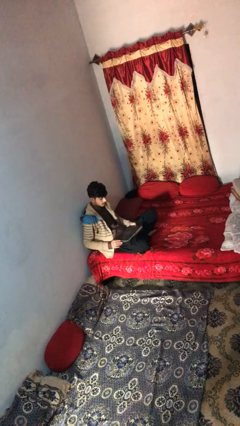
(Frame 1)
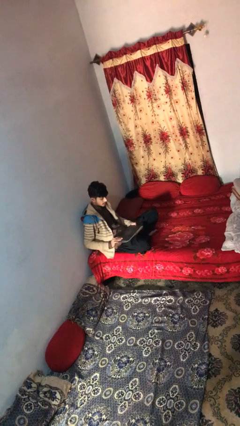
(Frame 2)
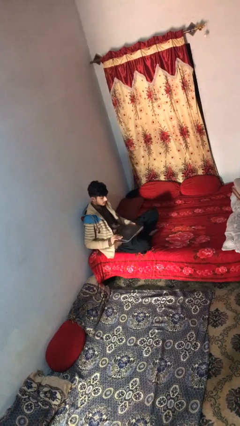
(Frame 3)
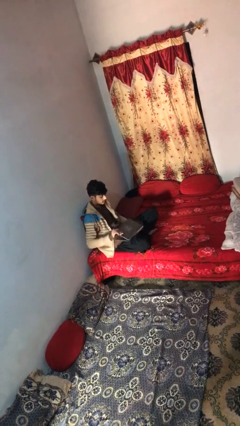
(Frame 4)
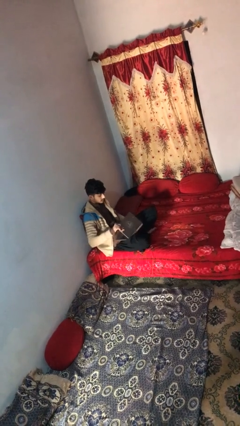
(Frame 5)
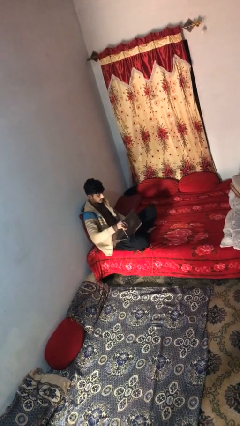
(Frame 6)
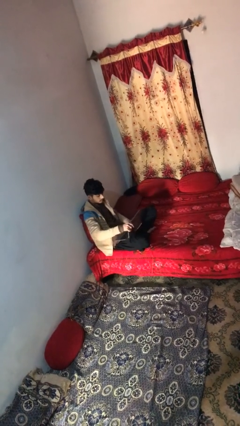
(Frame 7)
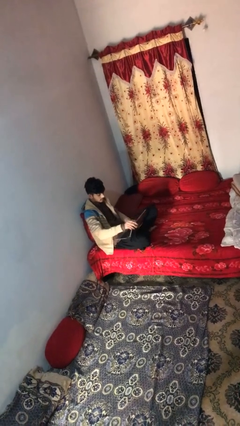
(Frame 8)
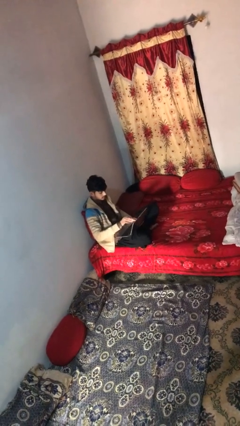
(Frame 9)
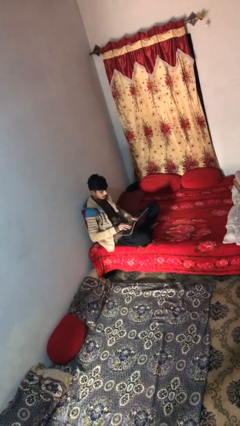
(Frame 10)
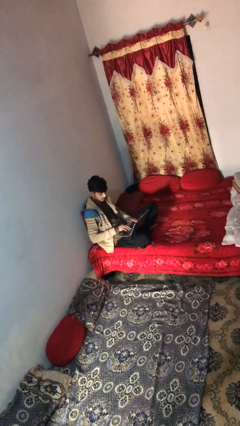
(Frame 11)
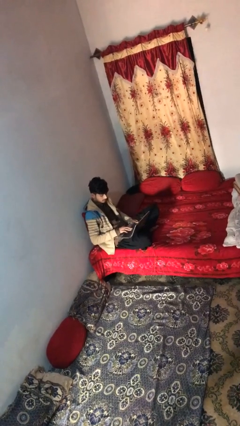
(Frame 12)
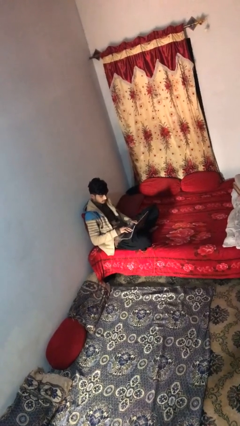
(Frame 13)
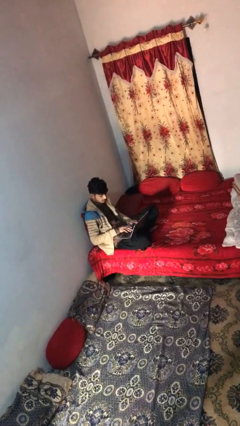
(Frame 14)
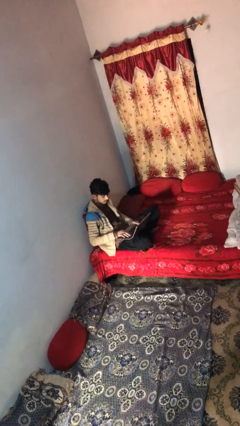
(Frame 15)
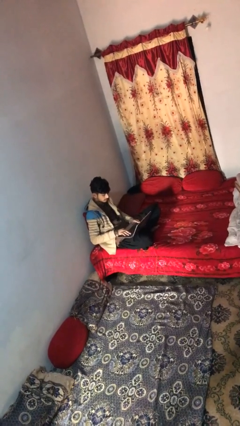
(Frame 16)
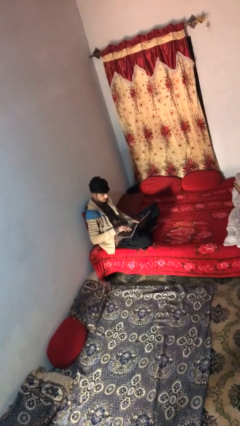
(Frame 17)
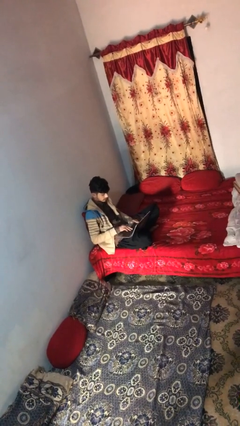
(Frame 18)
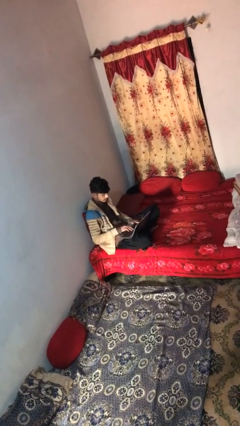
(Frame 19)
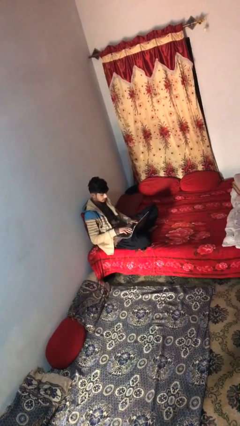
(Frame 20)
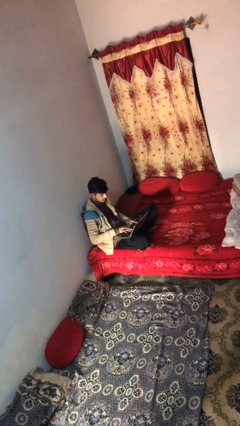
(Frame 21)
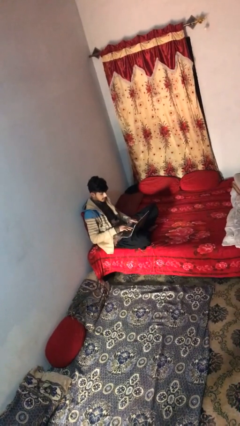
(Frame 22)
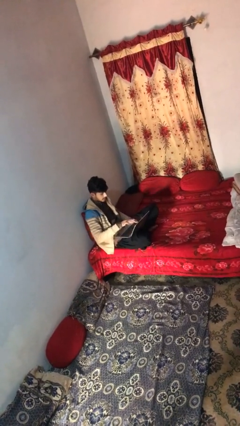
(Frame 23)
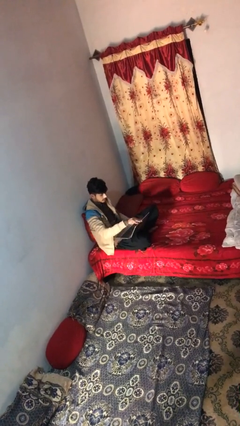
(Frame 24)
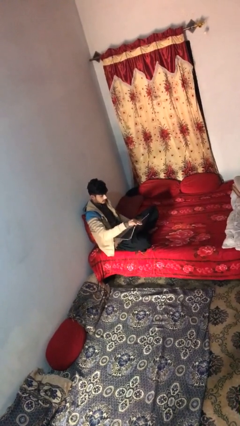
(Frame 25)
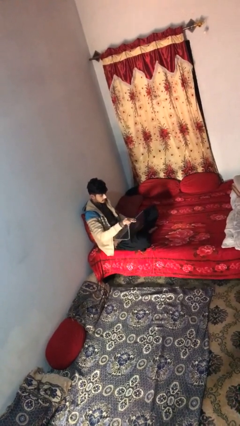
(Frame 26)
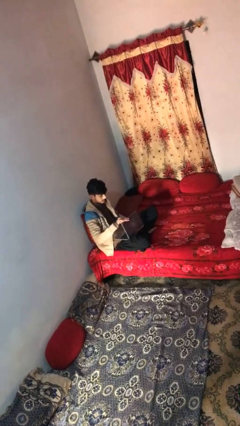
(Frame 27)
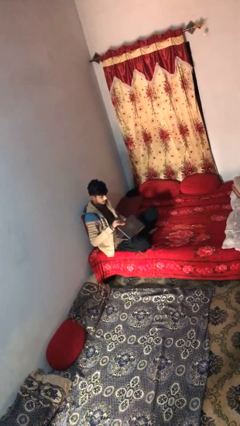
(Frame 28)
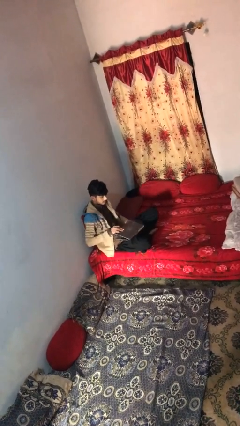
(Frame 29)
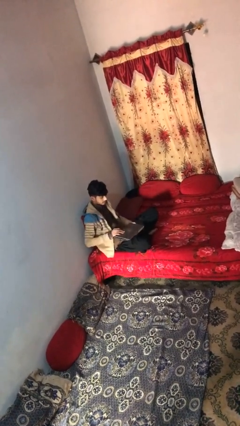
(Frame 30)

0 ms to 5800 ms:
person interacts with laptop

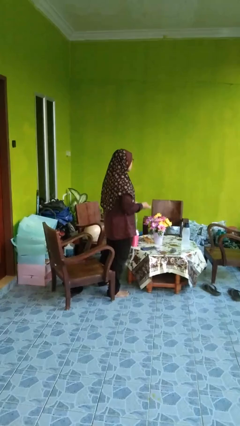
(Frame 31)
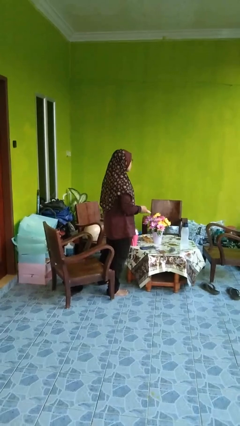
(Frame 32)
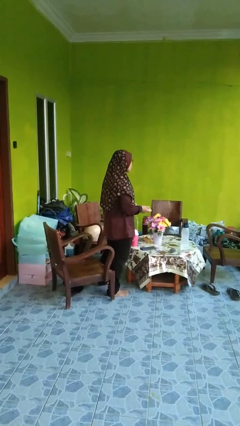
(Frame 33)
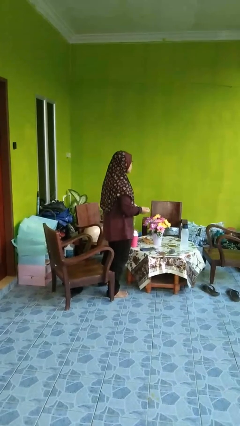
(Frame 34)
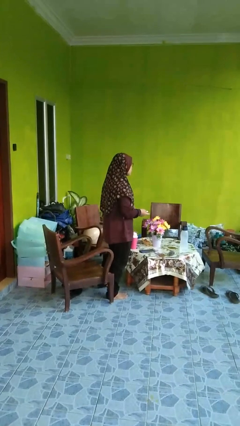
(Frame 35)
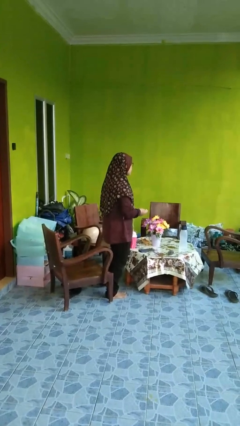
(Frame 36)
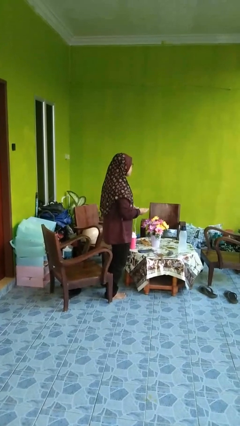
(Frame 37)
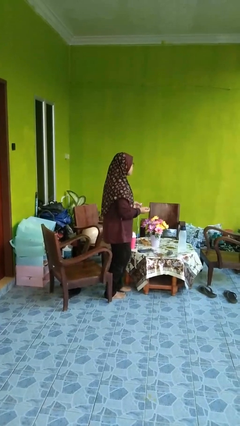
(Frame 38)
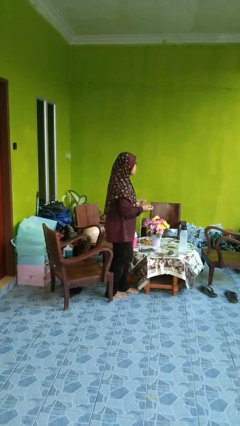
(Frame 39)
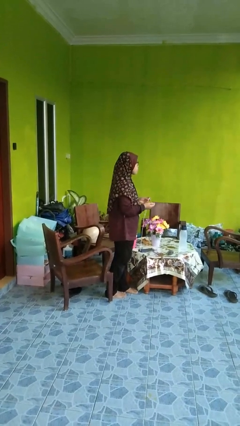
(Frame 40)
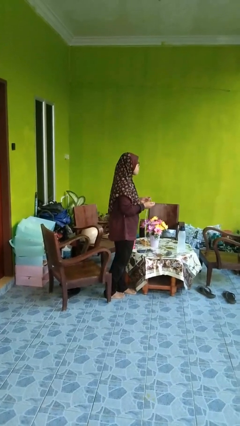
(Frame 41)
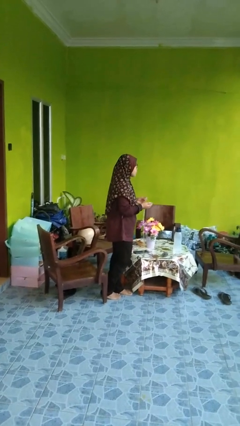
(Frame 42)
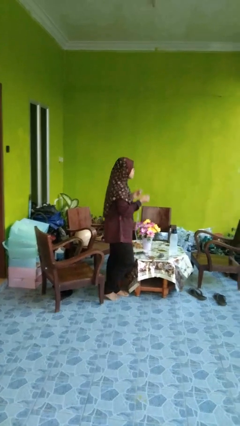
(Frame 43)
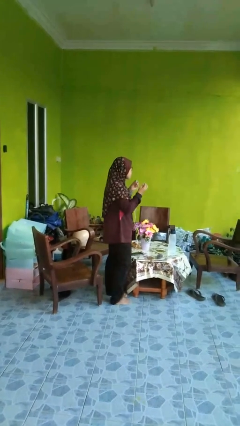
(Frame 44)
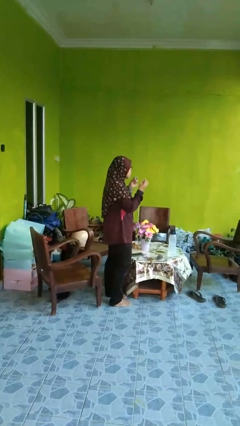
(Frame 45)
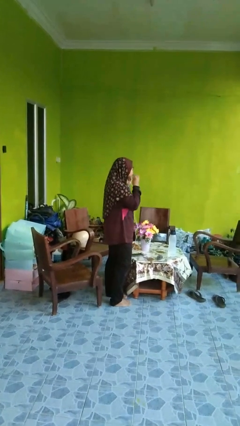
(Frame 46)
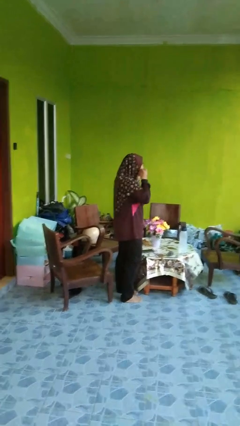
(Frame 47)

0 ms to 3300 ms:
person takes off headphones

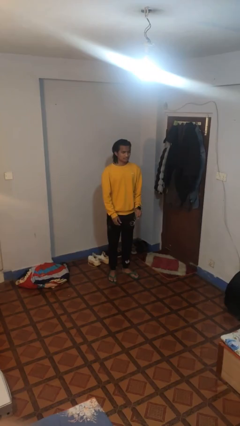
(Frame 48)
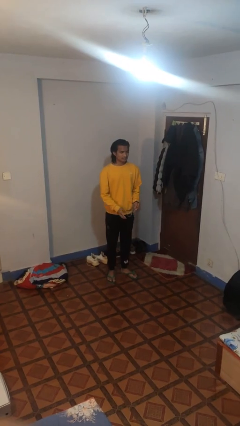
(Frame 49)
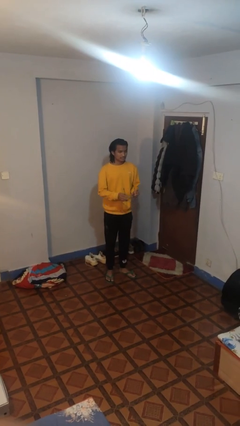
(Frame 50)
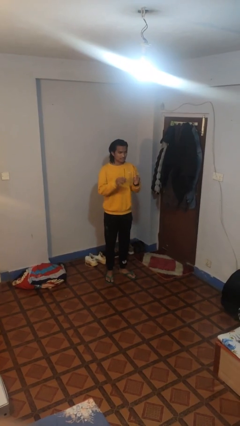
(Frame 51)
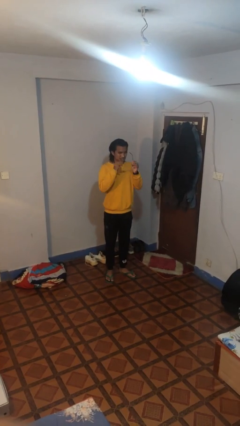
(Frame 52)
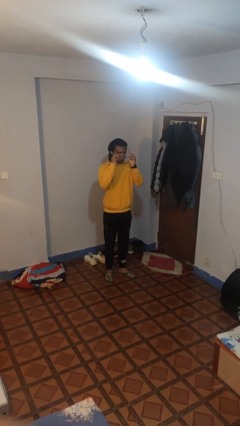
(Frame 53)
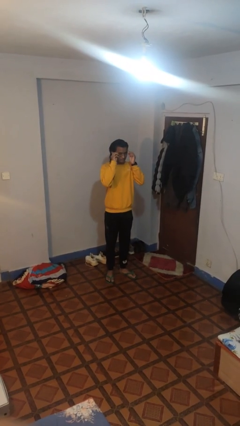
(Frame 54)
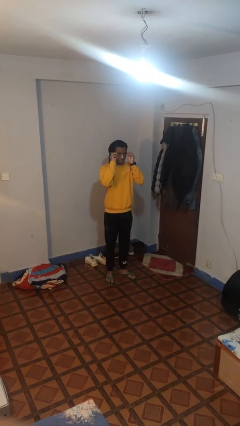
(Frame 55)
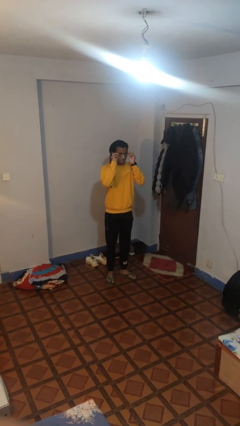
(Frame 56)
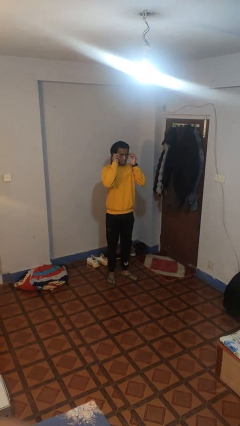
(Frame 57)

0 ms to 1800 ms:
person puts on glasses

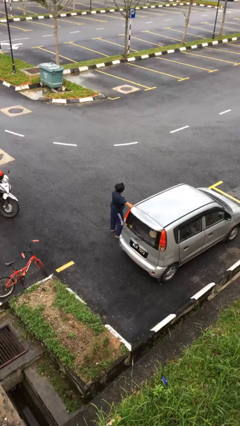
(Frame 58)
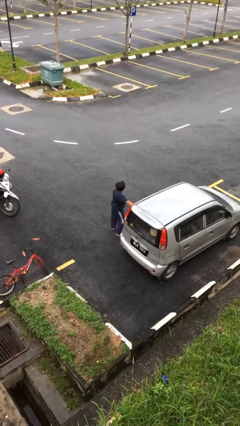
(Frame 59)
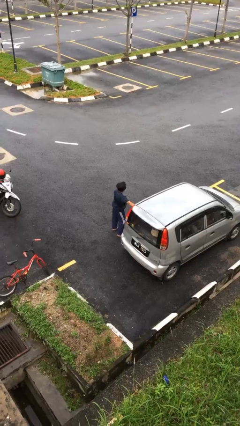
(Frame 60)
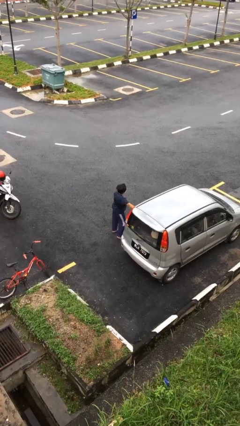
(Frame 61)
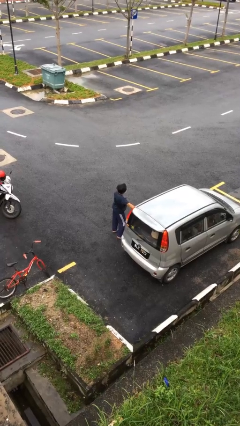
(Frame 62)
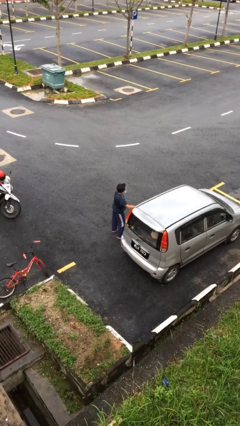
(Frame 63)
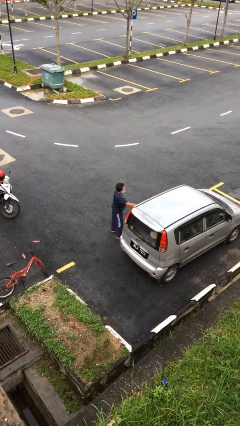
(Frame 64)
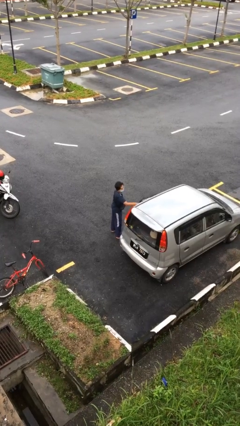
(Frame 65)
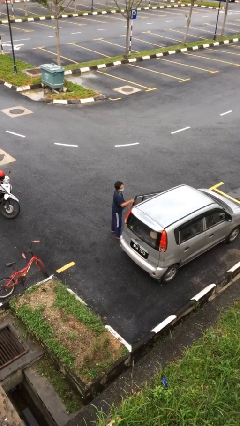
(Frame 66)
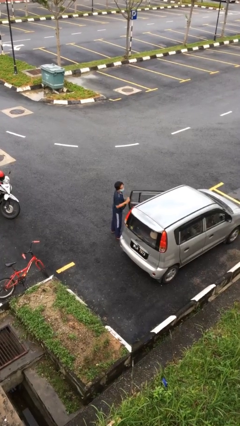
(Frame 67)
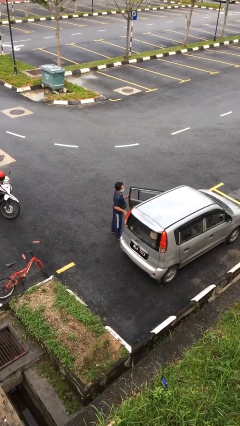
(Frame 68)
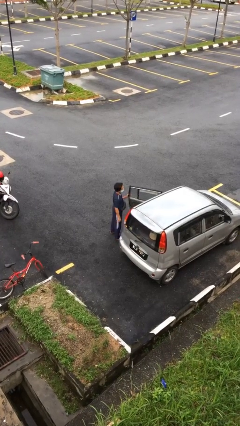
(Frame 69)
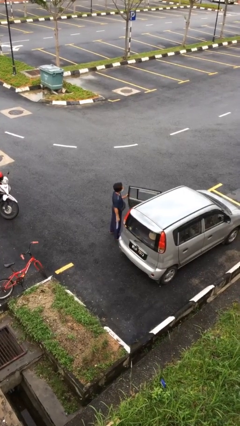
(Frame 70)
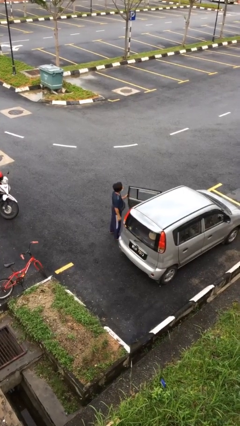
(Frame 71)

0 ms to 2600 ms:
person opens car door

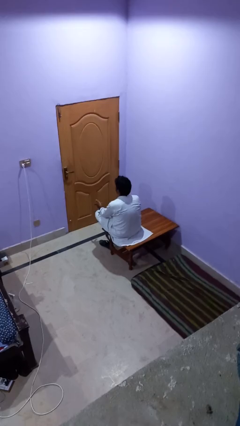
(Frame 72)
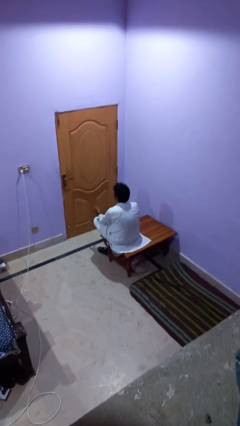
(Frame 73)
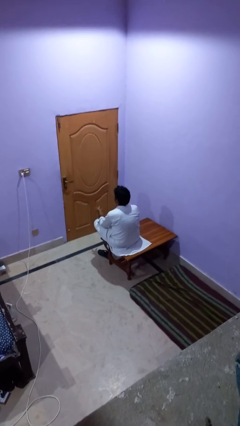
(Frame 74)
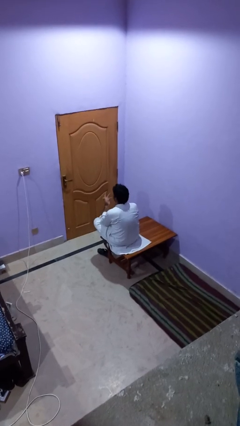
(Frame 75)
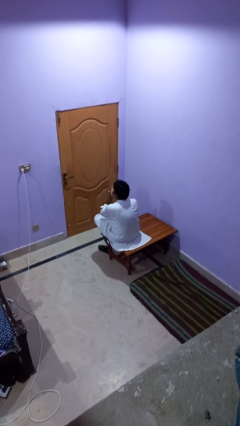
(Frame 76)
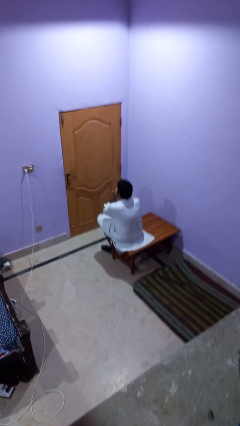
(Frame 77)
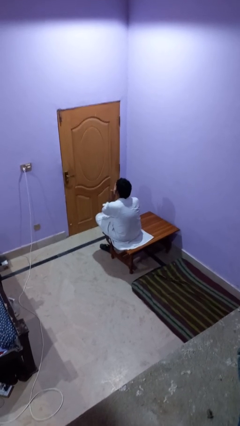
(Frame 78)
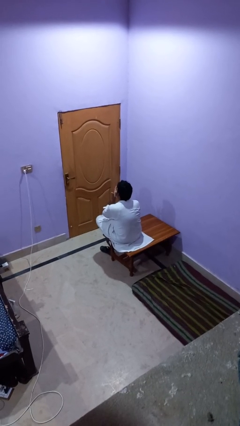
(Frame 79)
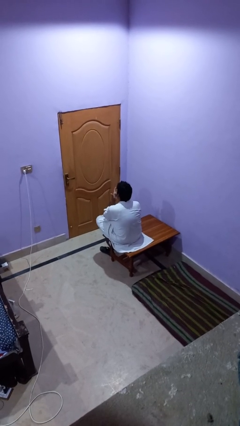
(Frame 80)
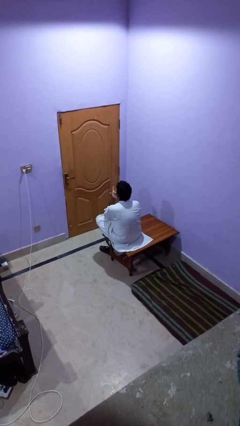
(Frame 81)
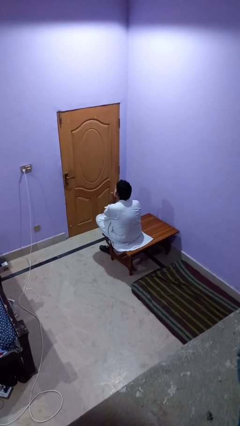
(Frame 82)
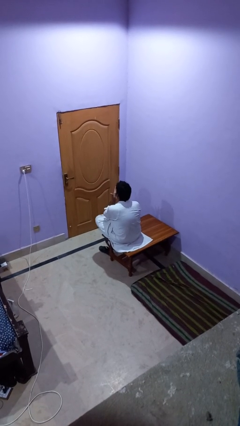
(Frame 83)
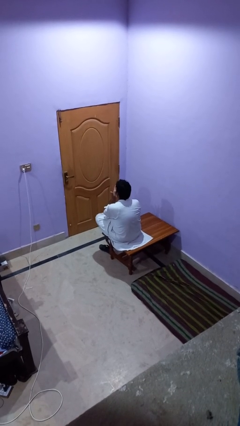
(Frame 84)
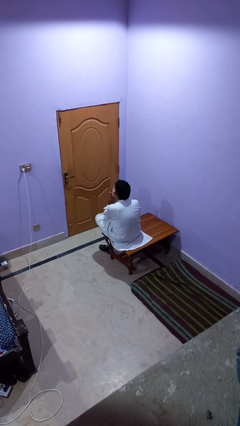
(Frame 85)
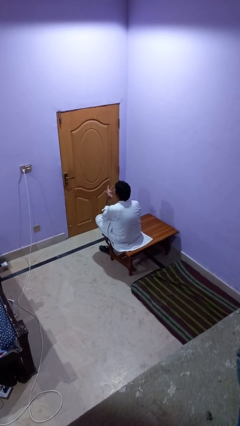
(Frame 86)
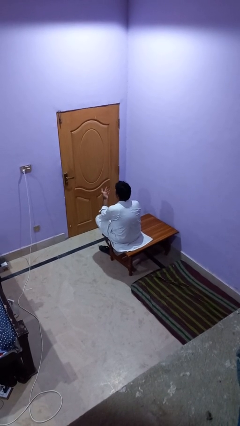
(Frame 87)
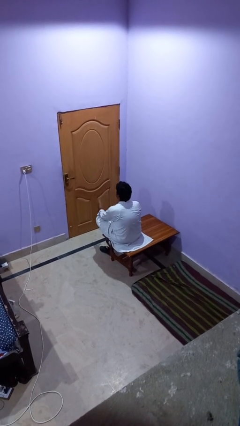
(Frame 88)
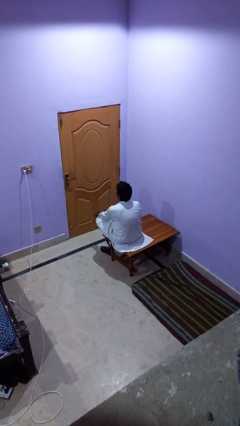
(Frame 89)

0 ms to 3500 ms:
person licks fingers

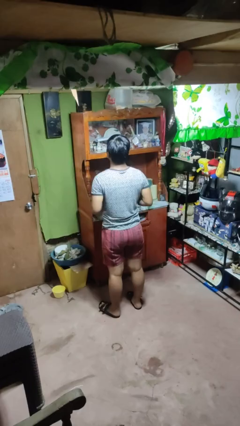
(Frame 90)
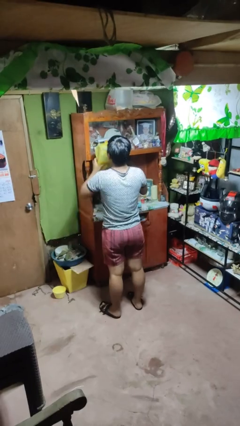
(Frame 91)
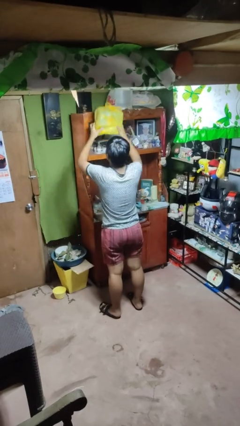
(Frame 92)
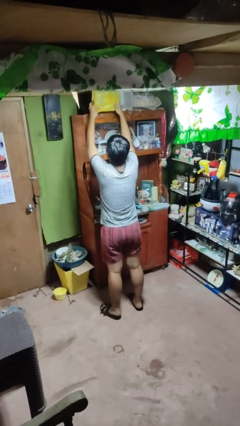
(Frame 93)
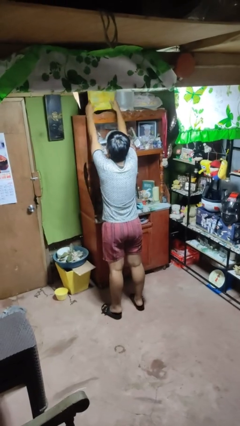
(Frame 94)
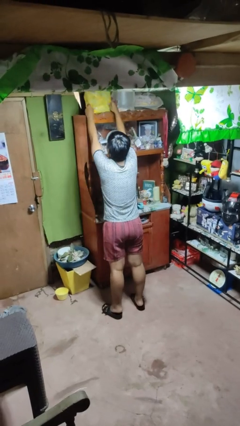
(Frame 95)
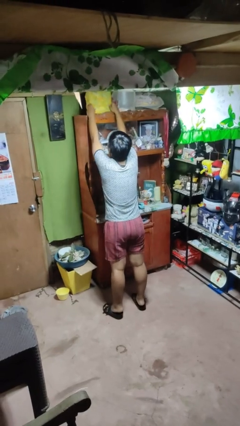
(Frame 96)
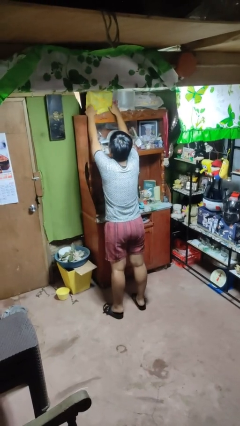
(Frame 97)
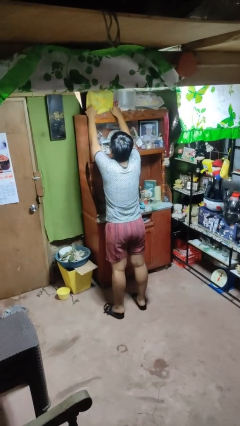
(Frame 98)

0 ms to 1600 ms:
person puts down object on shelf
